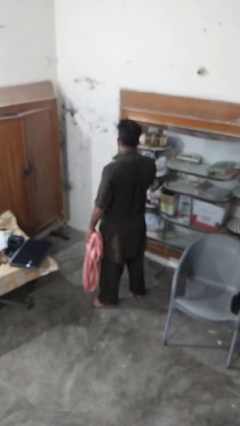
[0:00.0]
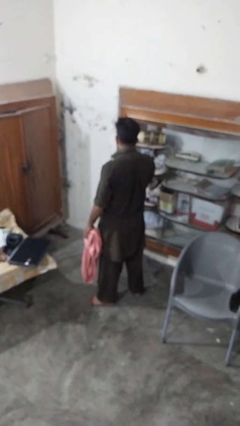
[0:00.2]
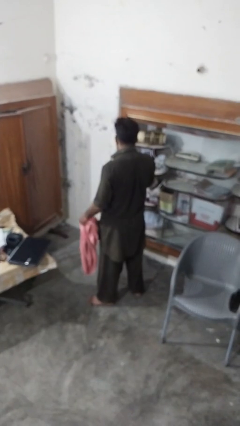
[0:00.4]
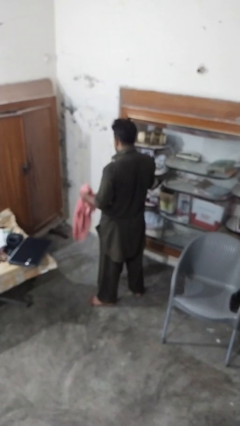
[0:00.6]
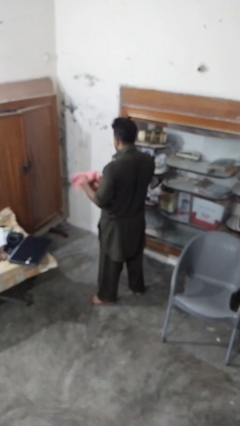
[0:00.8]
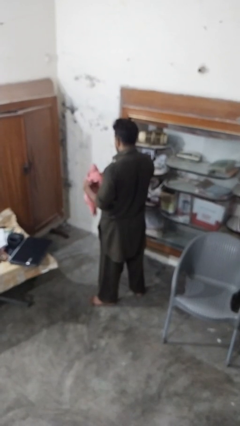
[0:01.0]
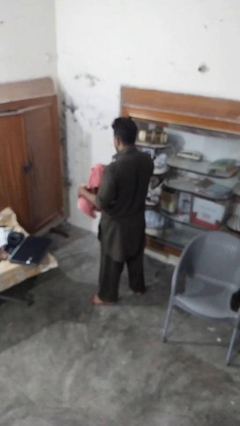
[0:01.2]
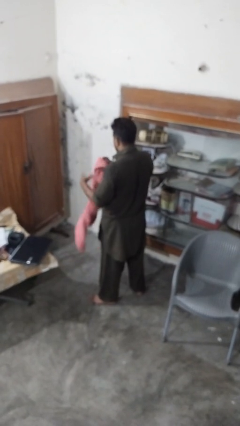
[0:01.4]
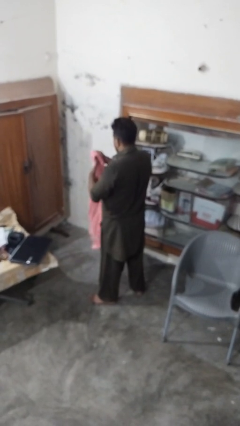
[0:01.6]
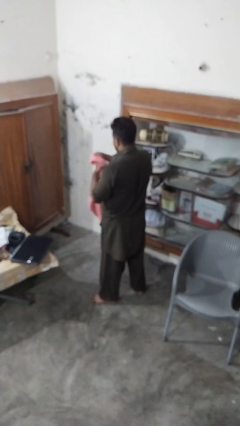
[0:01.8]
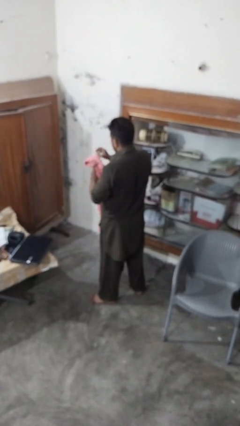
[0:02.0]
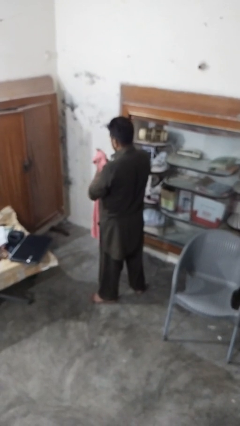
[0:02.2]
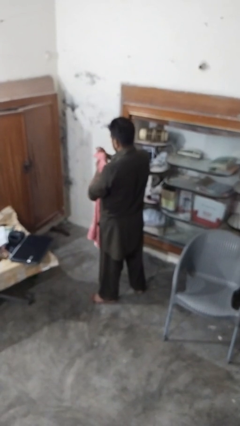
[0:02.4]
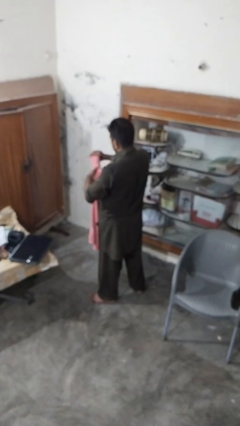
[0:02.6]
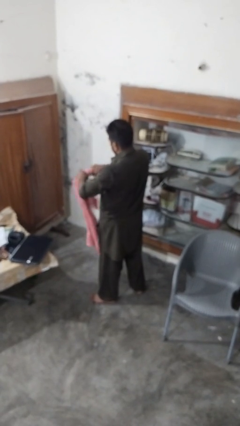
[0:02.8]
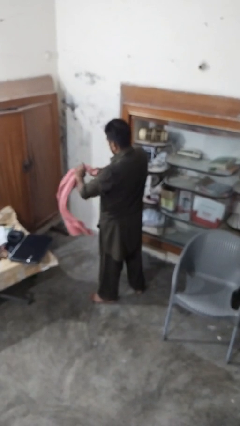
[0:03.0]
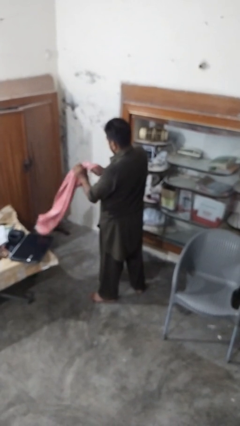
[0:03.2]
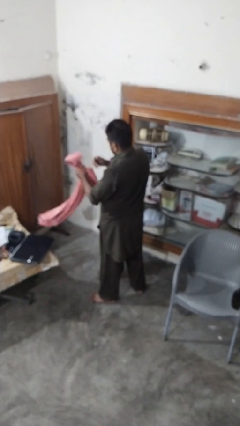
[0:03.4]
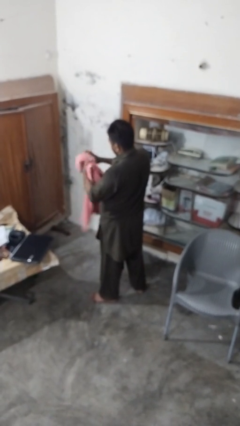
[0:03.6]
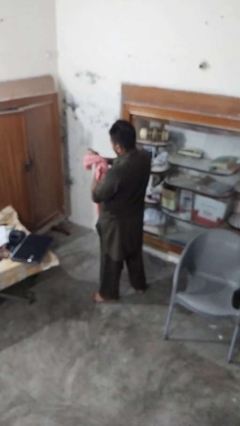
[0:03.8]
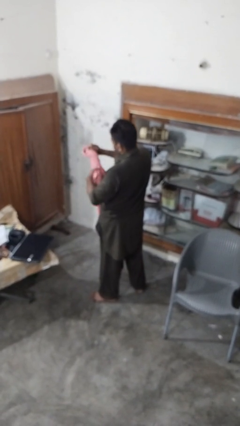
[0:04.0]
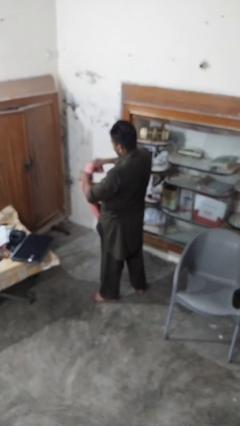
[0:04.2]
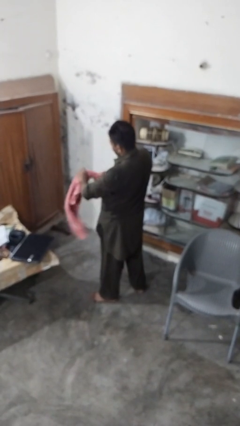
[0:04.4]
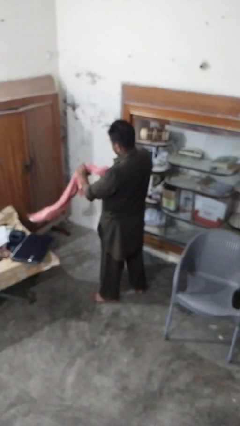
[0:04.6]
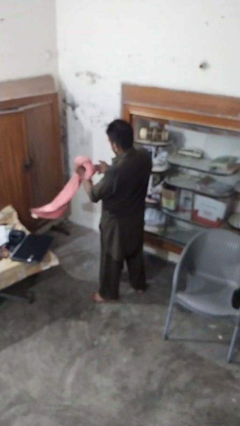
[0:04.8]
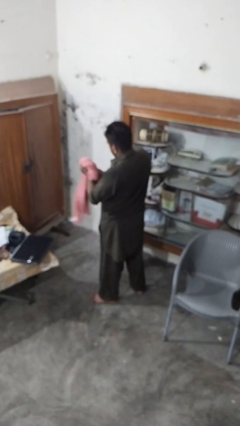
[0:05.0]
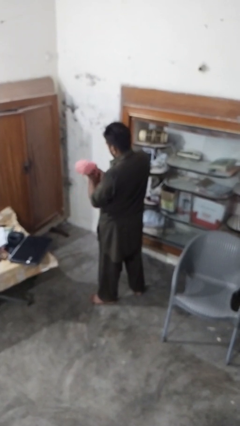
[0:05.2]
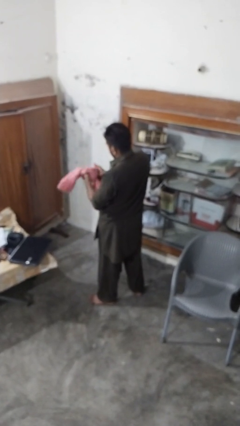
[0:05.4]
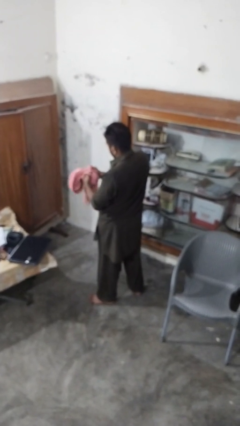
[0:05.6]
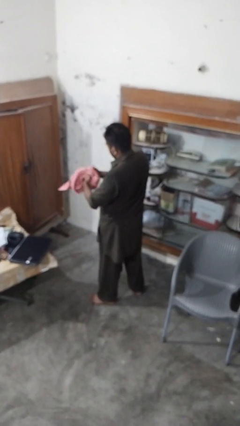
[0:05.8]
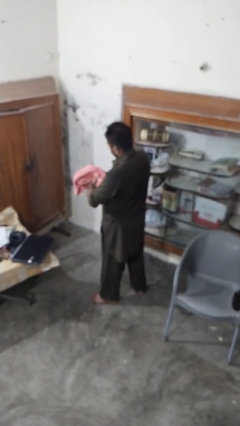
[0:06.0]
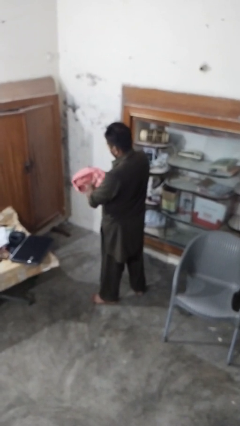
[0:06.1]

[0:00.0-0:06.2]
person squeezes object

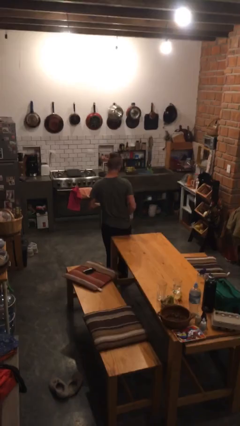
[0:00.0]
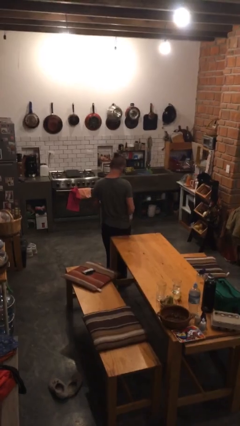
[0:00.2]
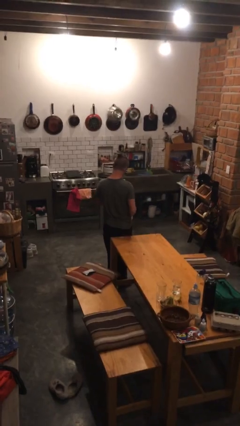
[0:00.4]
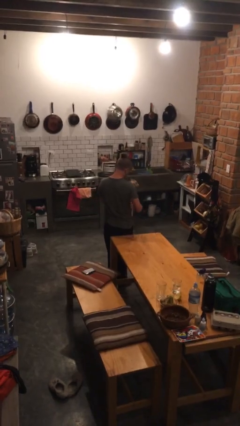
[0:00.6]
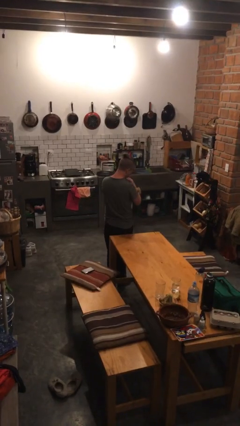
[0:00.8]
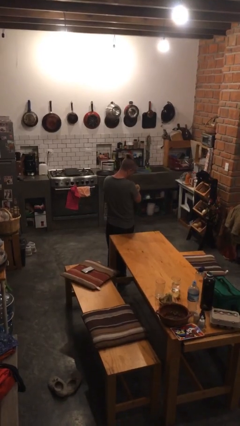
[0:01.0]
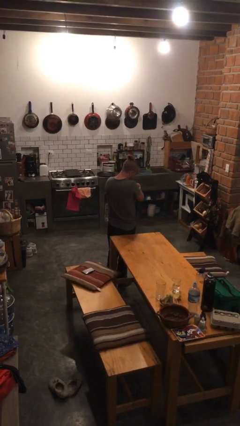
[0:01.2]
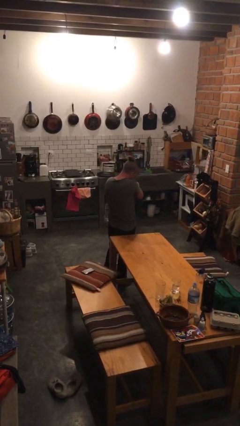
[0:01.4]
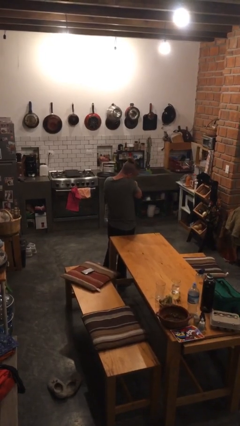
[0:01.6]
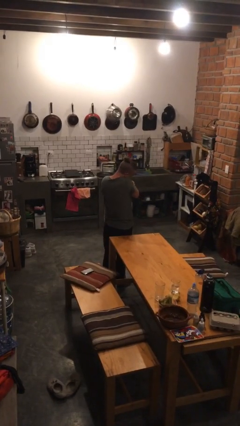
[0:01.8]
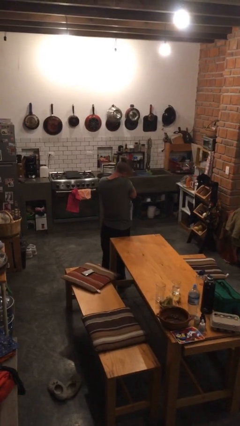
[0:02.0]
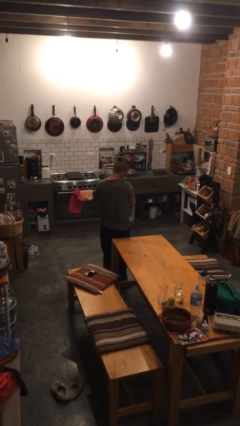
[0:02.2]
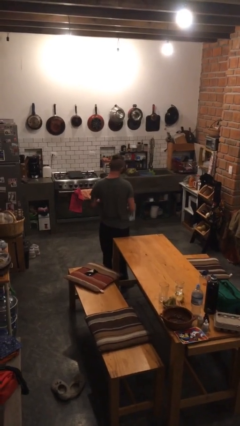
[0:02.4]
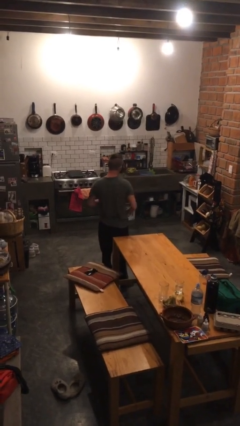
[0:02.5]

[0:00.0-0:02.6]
person hugs stuffed animal

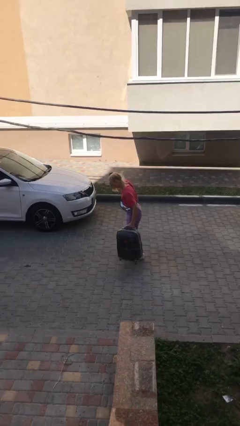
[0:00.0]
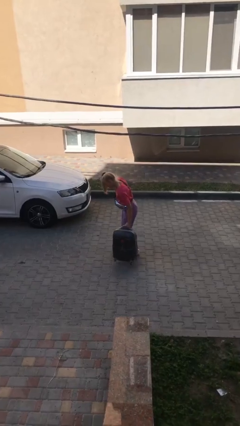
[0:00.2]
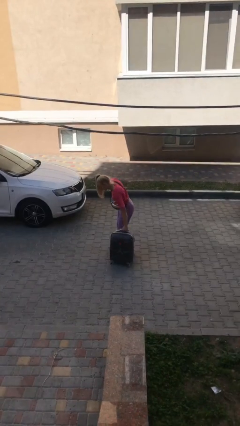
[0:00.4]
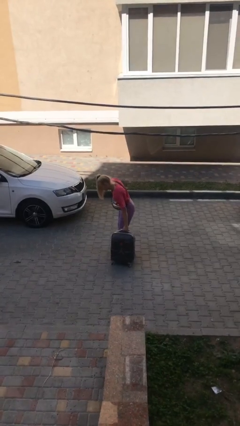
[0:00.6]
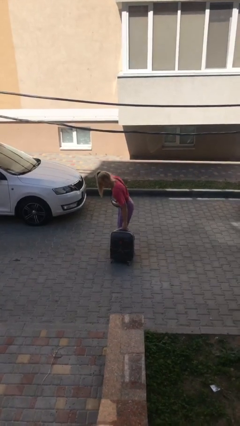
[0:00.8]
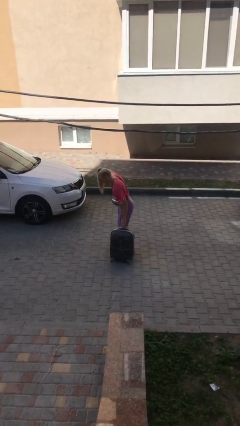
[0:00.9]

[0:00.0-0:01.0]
person puts down object on floor

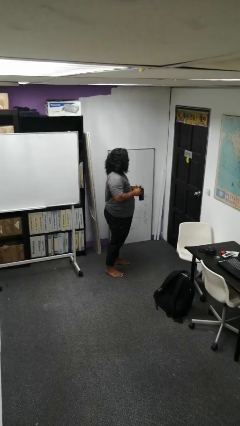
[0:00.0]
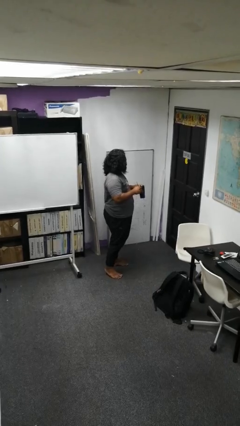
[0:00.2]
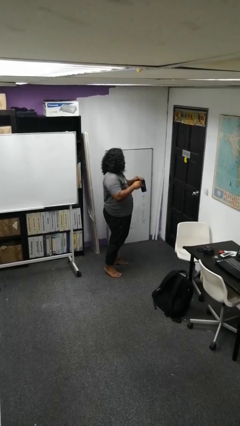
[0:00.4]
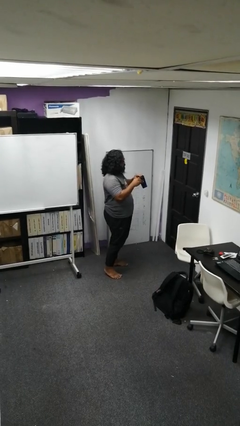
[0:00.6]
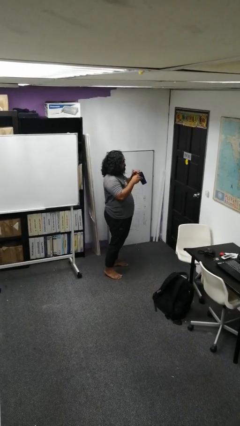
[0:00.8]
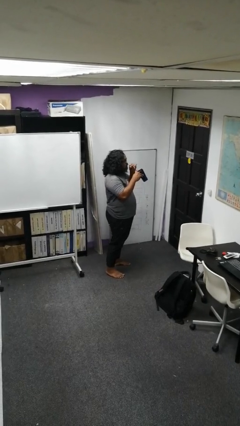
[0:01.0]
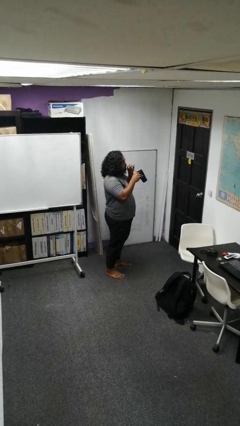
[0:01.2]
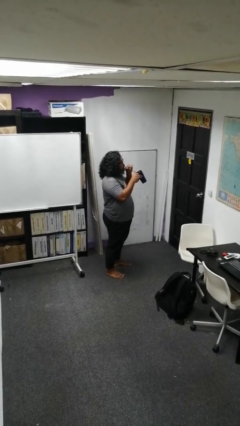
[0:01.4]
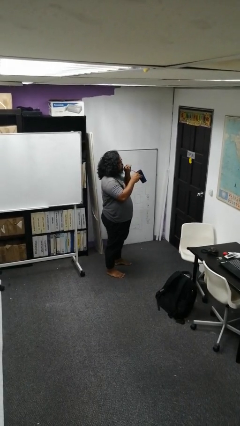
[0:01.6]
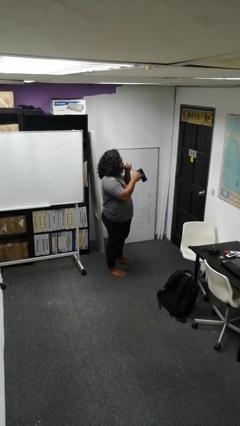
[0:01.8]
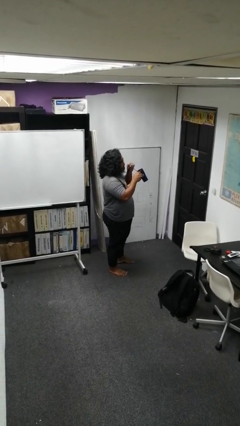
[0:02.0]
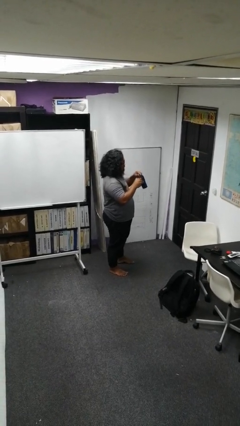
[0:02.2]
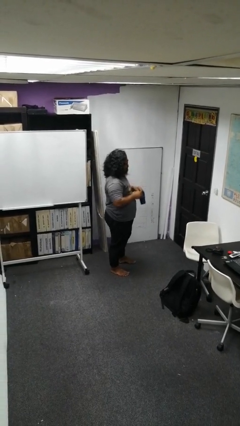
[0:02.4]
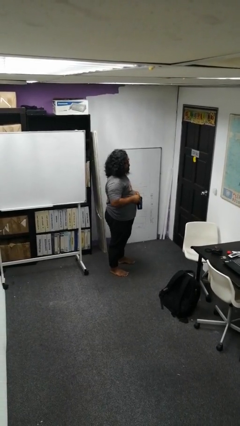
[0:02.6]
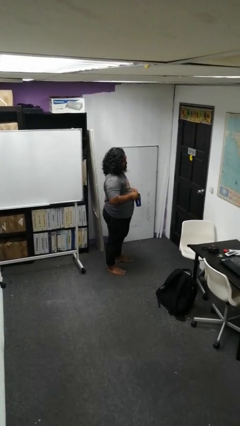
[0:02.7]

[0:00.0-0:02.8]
person drinks from straw

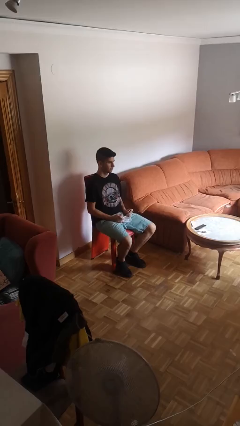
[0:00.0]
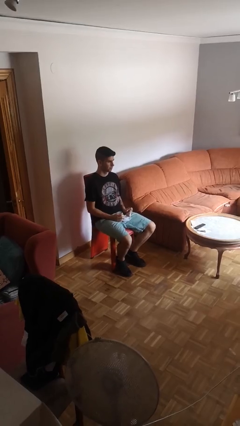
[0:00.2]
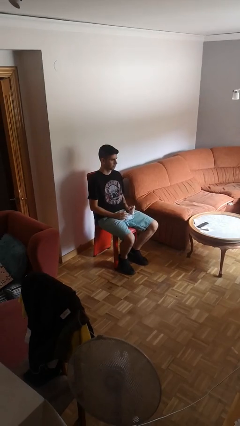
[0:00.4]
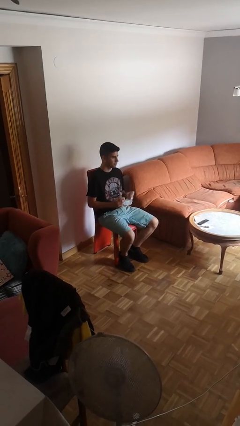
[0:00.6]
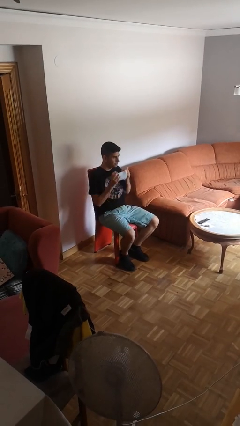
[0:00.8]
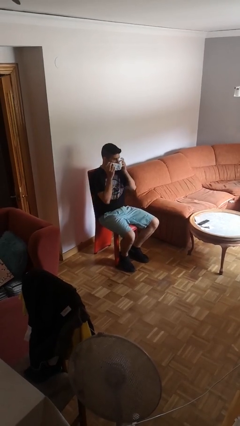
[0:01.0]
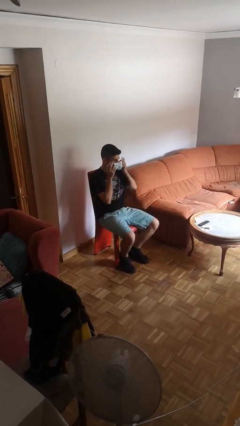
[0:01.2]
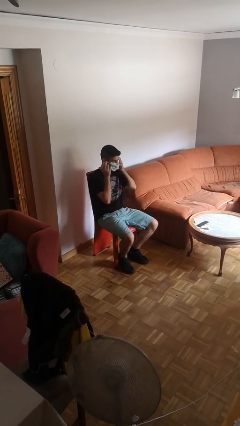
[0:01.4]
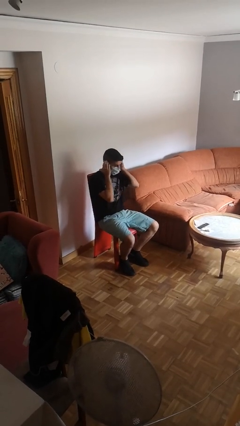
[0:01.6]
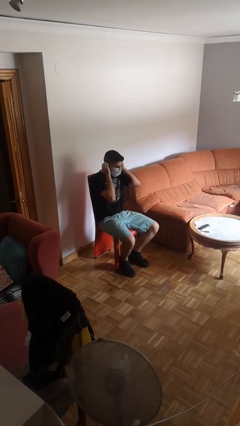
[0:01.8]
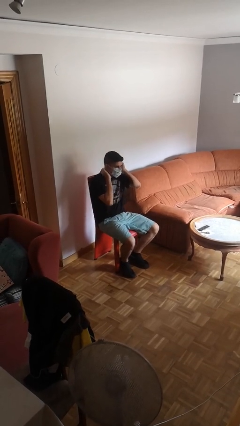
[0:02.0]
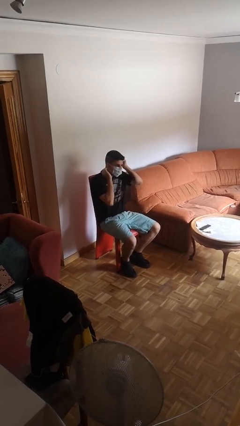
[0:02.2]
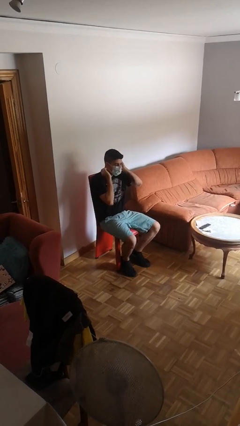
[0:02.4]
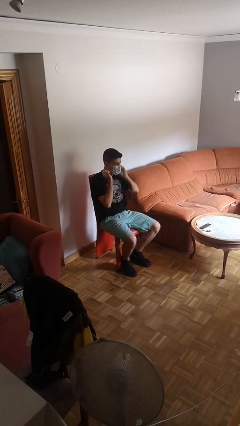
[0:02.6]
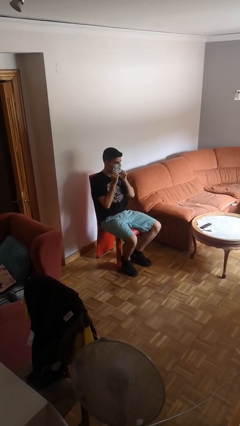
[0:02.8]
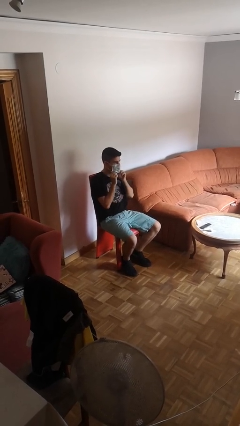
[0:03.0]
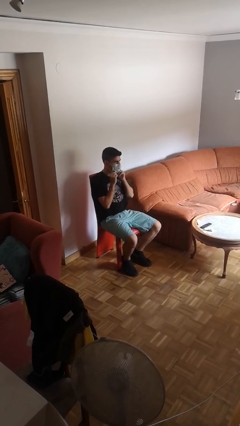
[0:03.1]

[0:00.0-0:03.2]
person puts on facemask

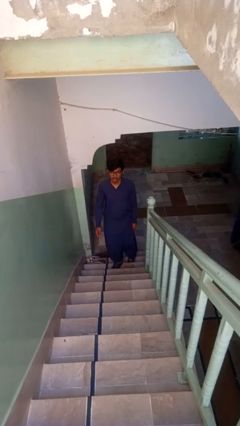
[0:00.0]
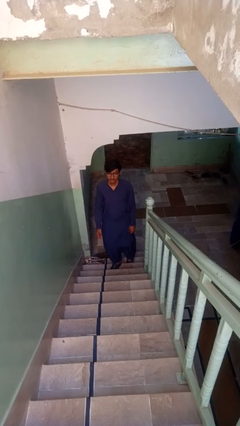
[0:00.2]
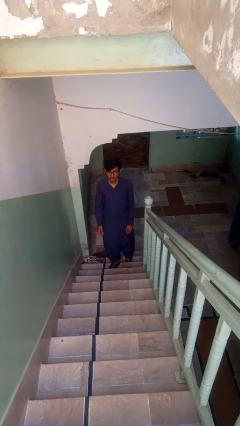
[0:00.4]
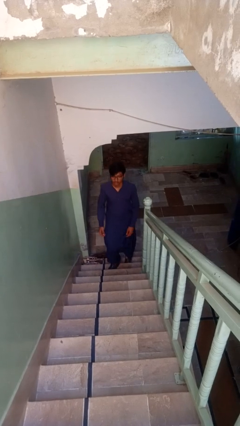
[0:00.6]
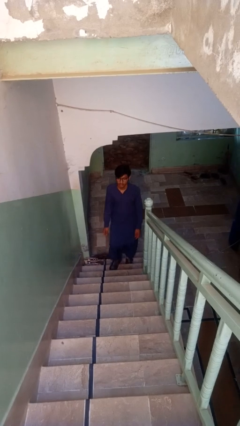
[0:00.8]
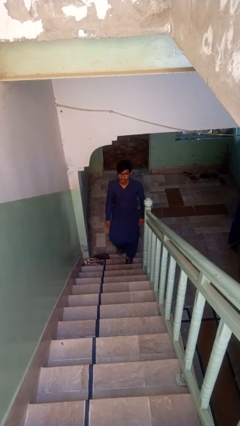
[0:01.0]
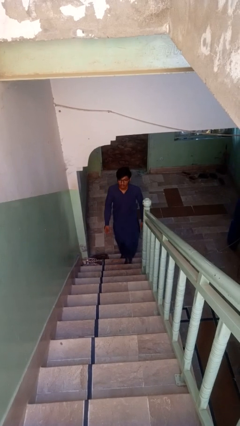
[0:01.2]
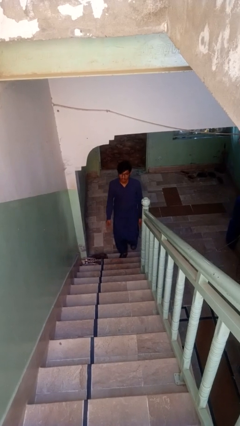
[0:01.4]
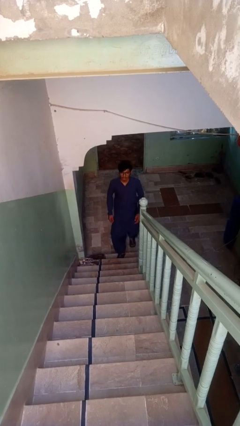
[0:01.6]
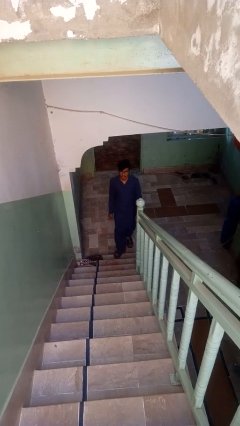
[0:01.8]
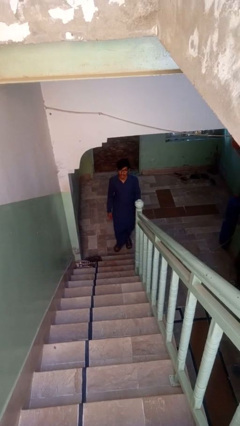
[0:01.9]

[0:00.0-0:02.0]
person climbs down stairs
